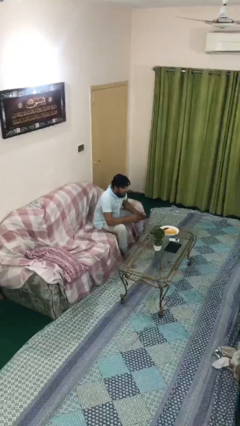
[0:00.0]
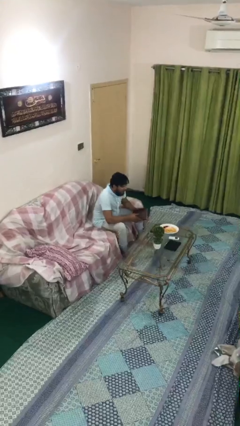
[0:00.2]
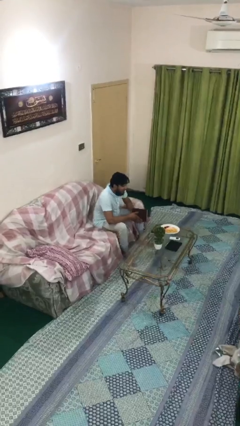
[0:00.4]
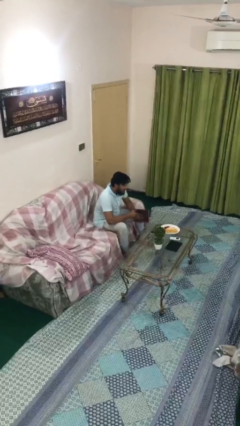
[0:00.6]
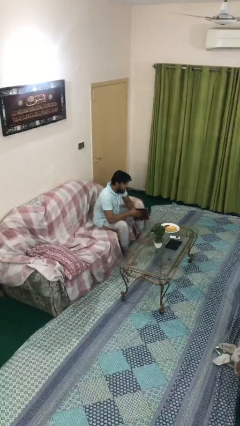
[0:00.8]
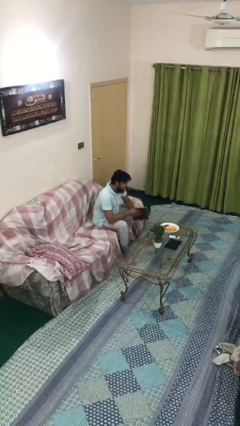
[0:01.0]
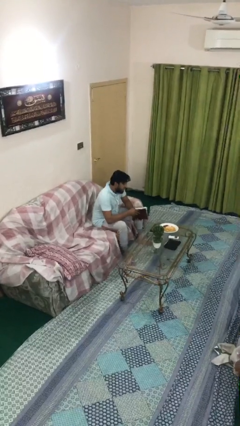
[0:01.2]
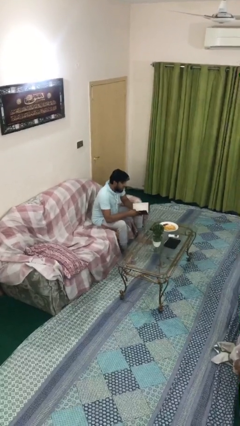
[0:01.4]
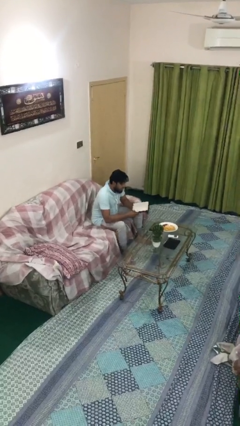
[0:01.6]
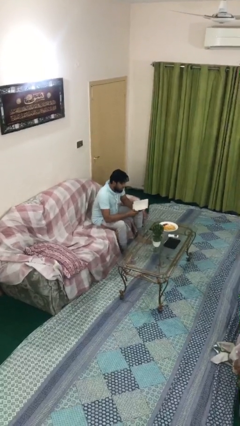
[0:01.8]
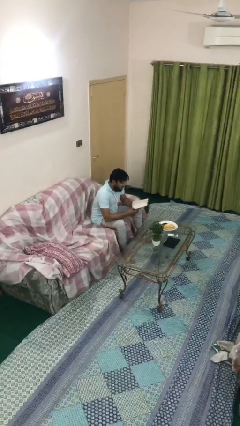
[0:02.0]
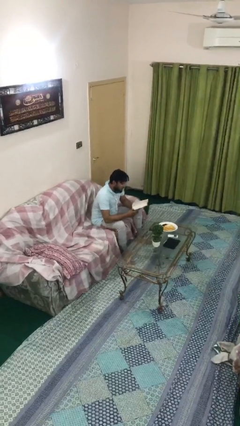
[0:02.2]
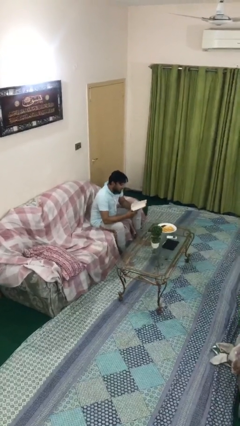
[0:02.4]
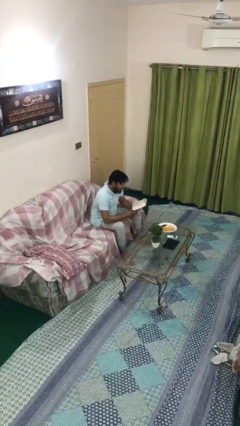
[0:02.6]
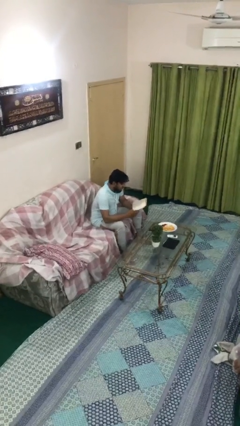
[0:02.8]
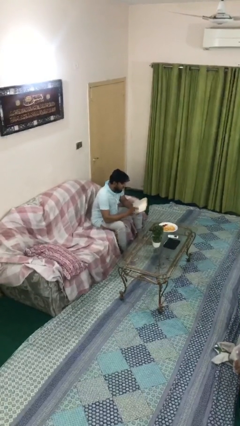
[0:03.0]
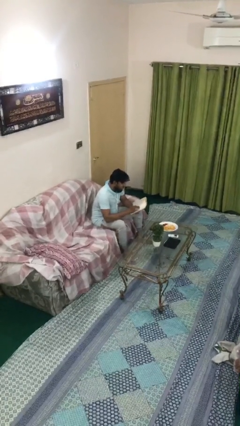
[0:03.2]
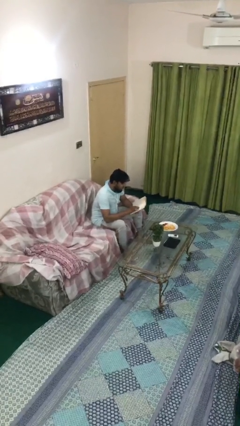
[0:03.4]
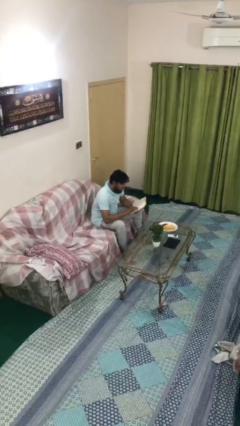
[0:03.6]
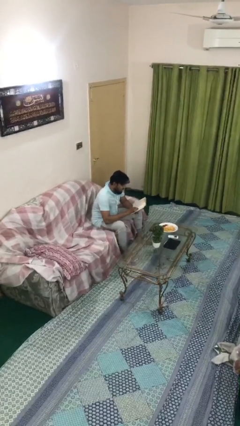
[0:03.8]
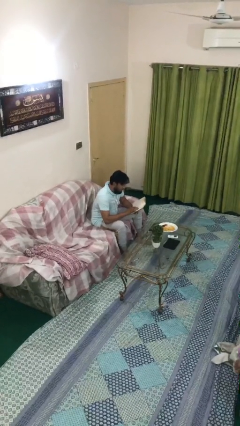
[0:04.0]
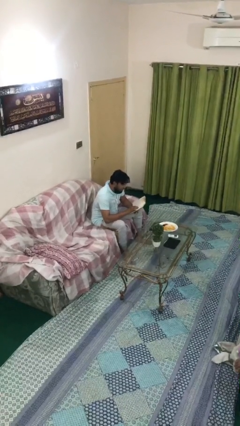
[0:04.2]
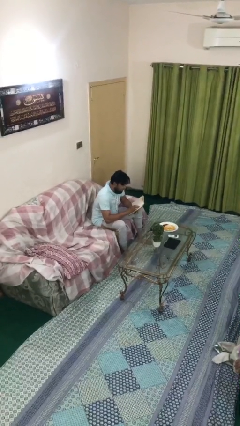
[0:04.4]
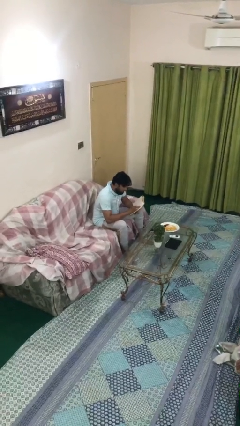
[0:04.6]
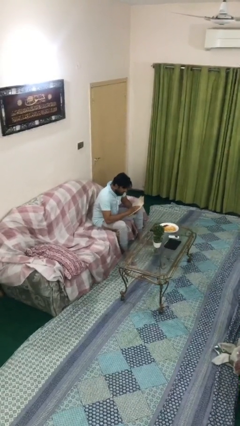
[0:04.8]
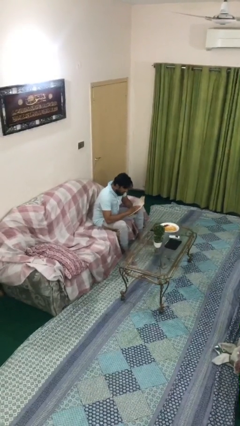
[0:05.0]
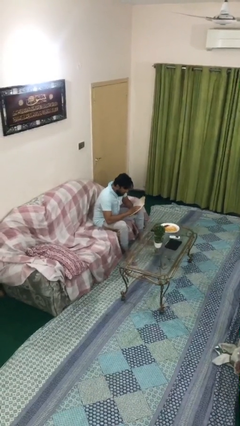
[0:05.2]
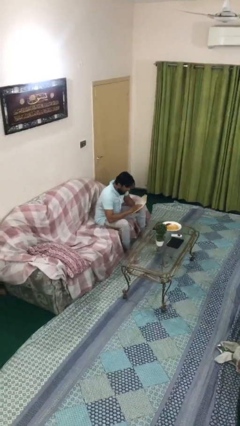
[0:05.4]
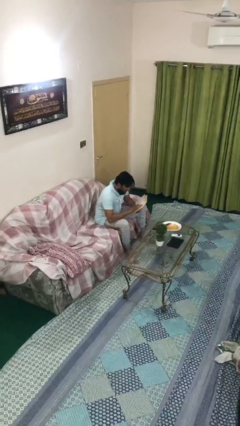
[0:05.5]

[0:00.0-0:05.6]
person reads document

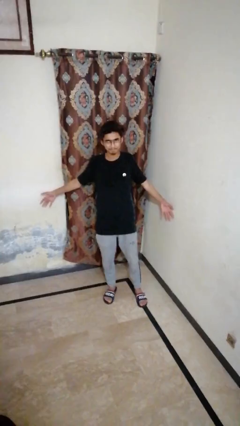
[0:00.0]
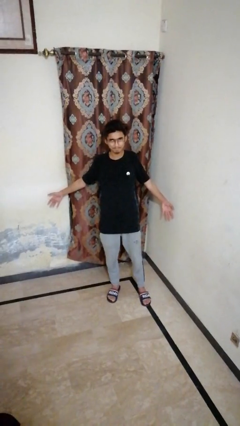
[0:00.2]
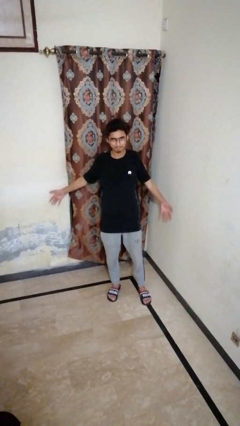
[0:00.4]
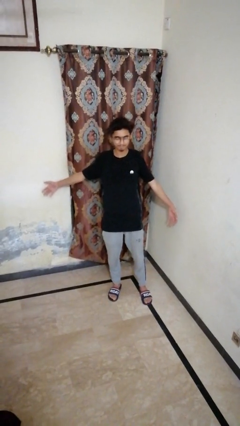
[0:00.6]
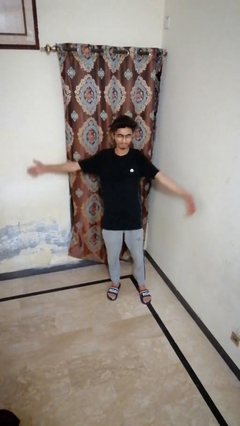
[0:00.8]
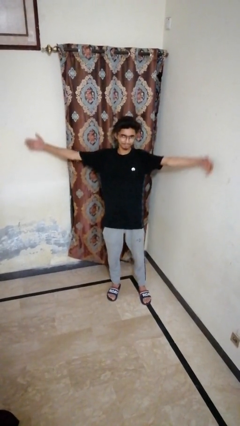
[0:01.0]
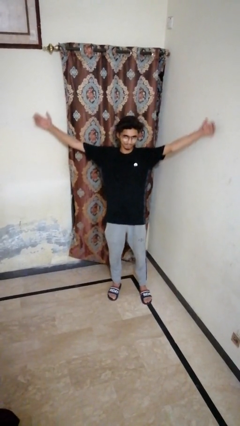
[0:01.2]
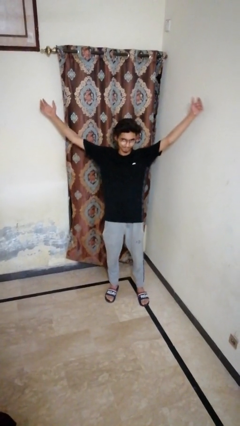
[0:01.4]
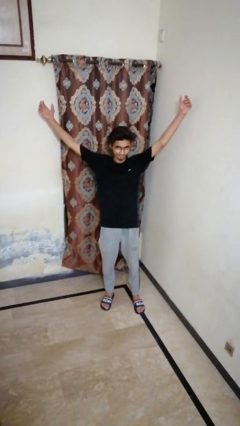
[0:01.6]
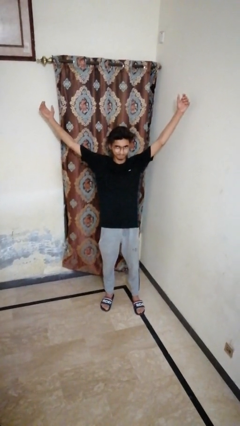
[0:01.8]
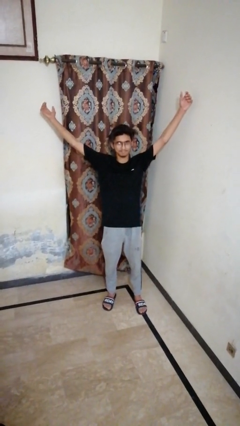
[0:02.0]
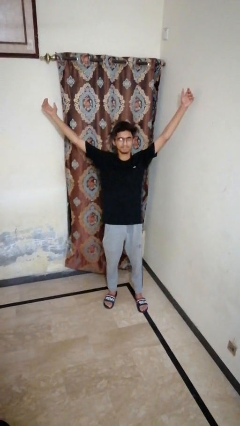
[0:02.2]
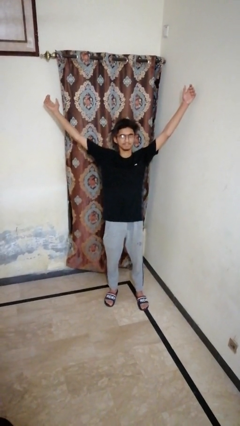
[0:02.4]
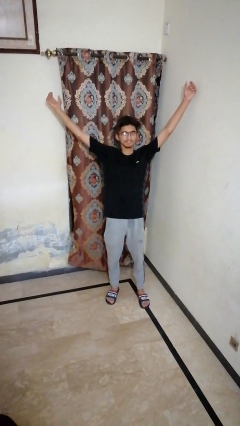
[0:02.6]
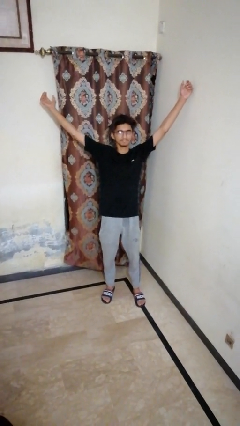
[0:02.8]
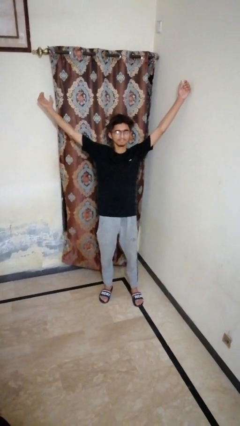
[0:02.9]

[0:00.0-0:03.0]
person stretches arms over head

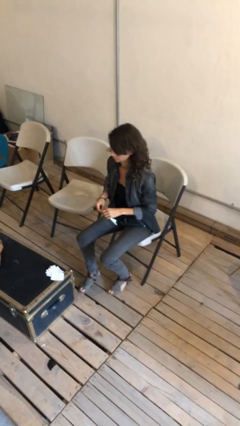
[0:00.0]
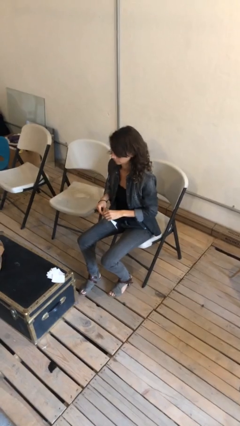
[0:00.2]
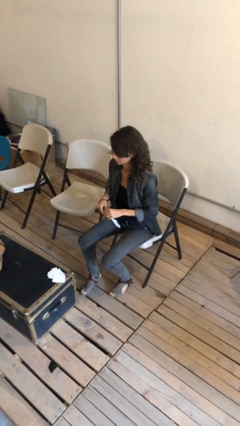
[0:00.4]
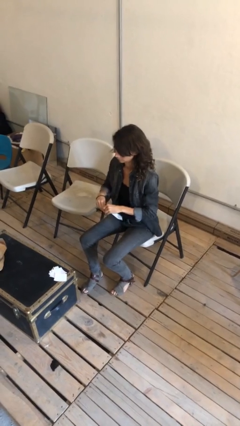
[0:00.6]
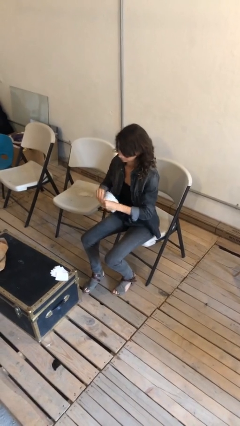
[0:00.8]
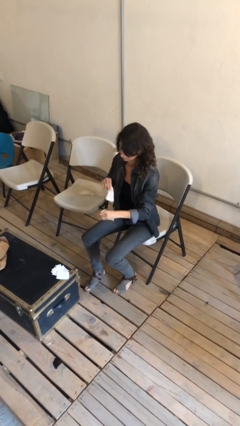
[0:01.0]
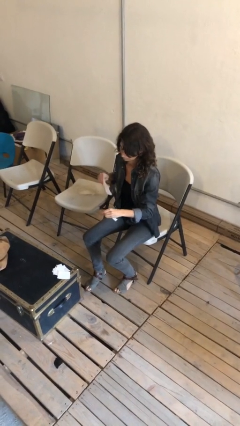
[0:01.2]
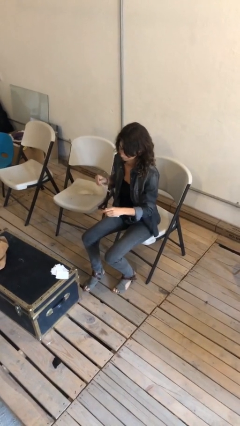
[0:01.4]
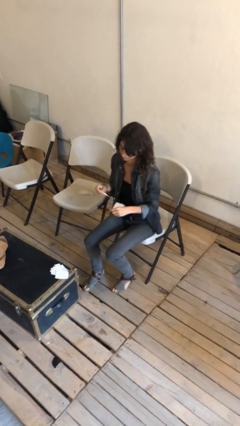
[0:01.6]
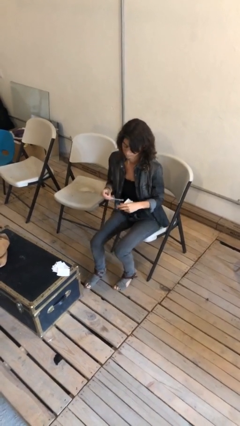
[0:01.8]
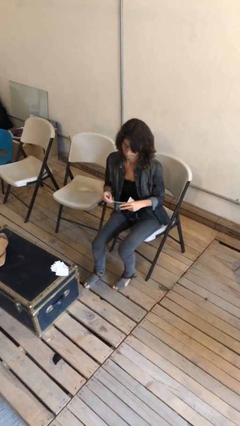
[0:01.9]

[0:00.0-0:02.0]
person tears paper

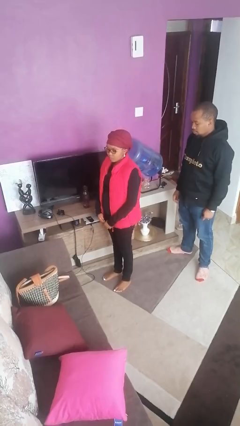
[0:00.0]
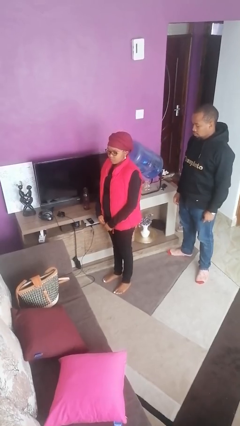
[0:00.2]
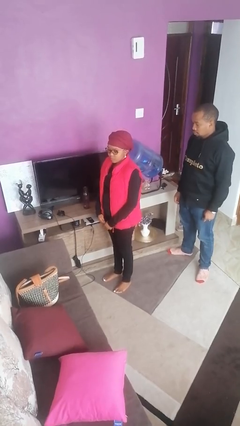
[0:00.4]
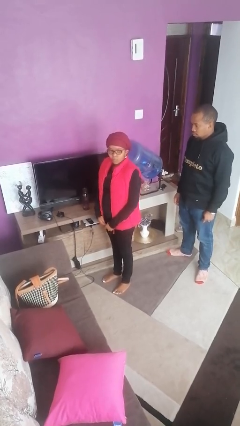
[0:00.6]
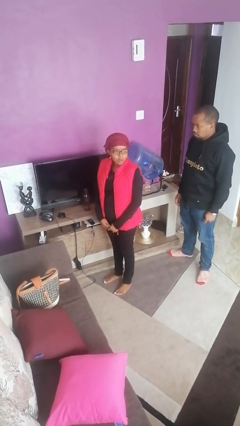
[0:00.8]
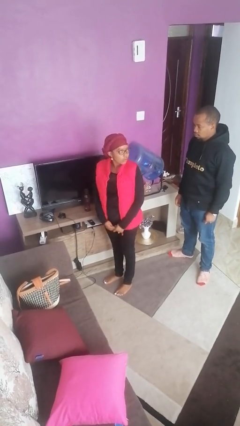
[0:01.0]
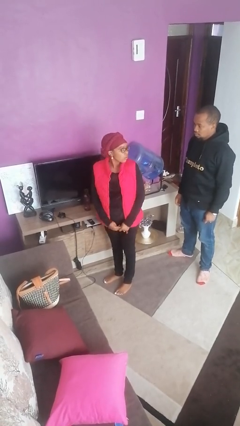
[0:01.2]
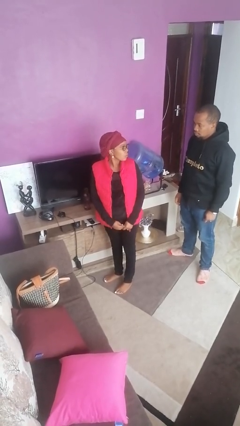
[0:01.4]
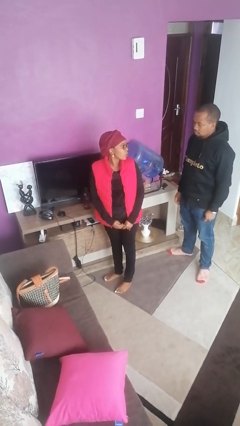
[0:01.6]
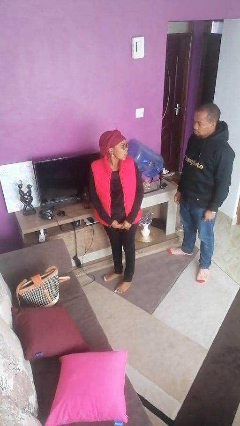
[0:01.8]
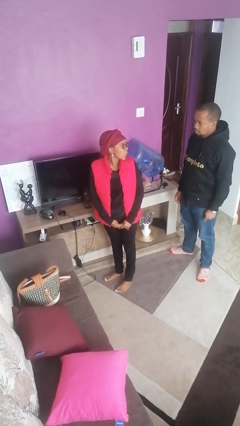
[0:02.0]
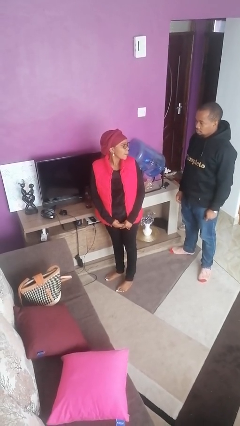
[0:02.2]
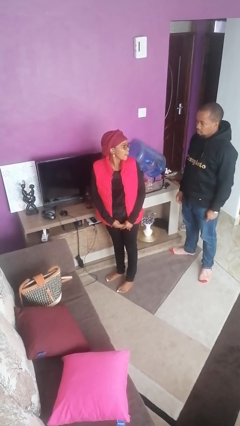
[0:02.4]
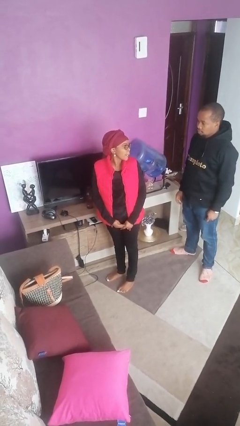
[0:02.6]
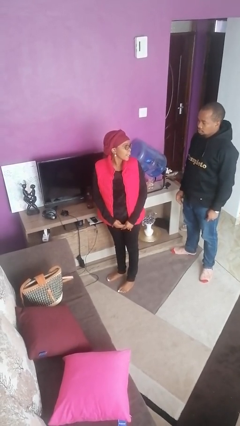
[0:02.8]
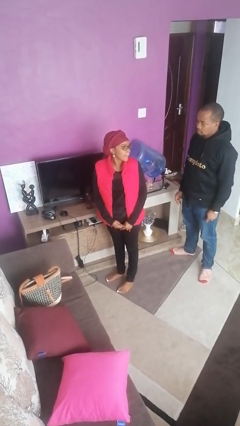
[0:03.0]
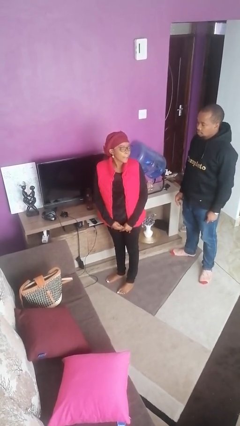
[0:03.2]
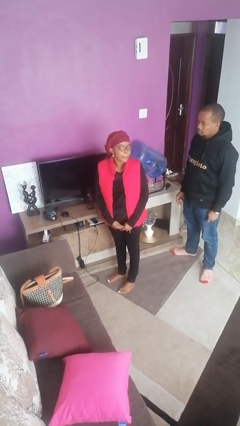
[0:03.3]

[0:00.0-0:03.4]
person looks over shoulder

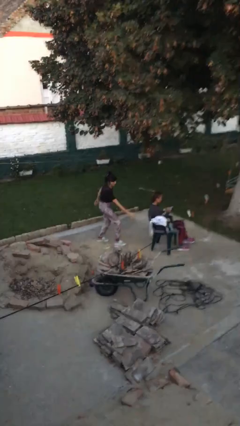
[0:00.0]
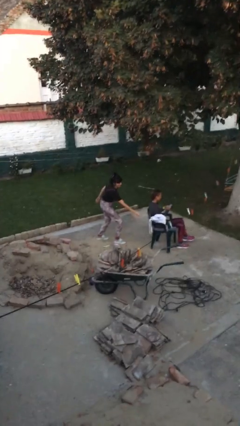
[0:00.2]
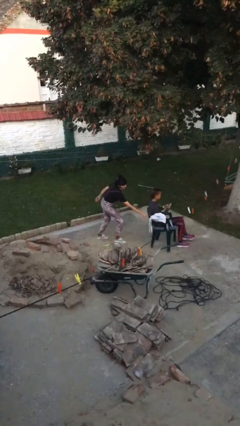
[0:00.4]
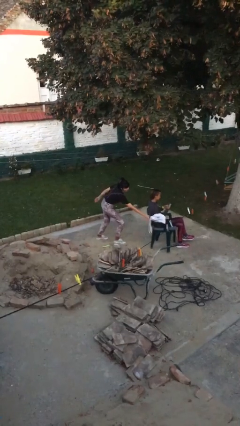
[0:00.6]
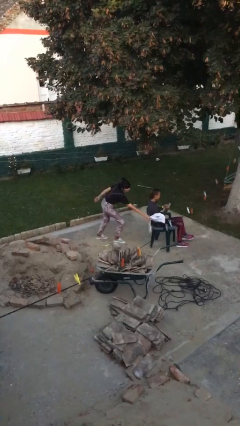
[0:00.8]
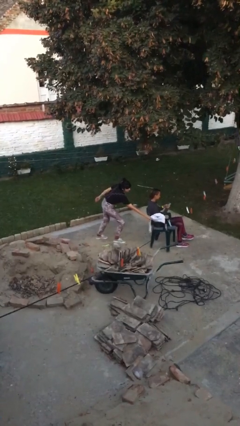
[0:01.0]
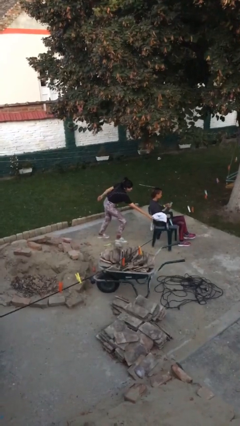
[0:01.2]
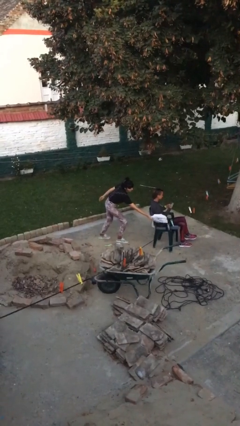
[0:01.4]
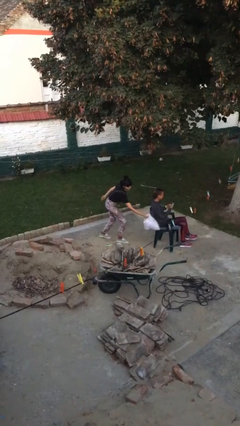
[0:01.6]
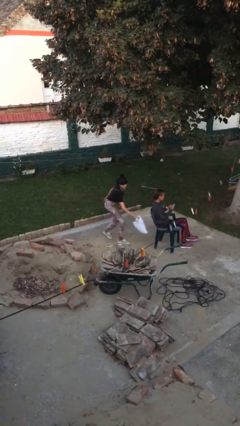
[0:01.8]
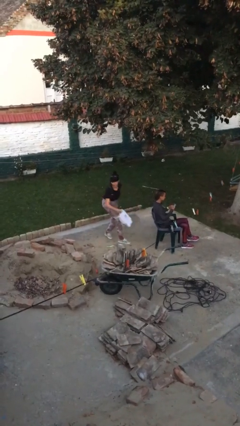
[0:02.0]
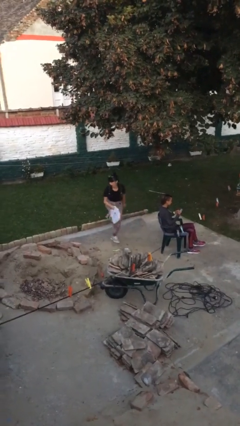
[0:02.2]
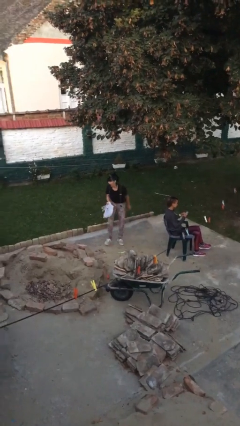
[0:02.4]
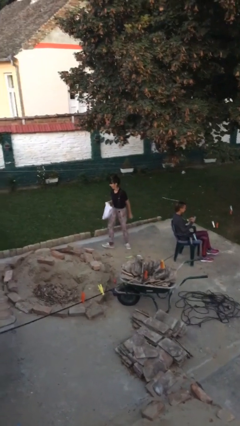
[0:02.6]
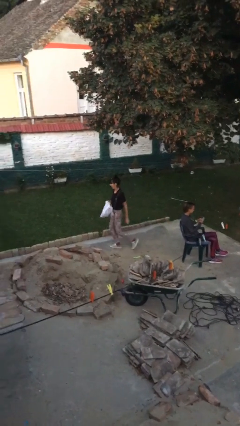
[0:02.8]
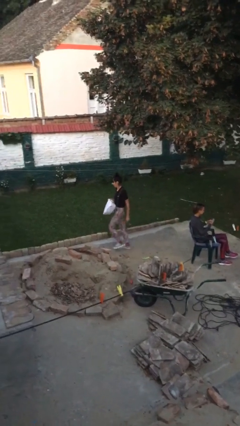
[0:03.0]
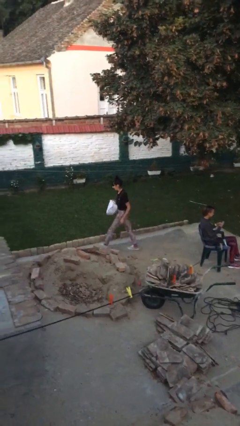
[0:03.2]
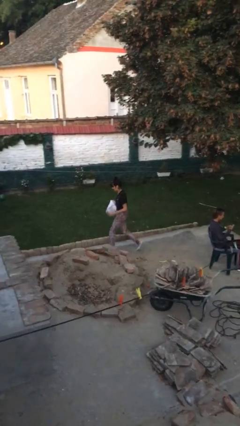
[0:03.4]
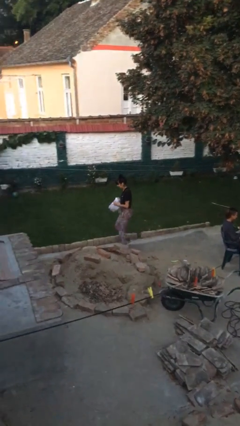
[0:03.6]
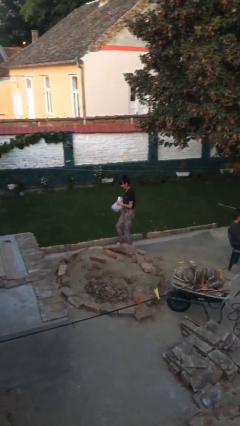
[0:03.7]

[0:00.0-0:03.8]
person steals object from person
